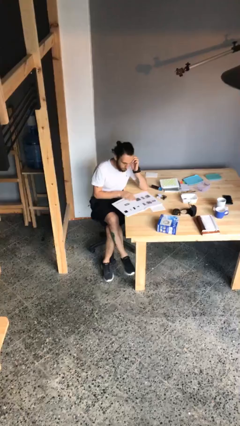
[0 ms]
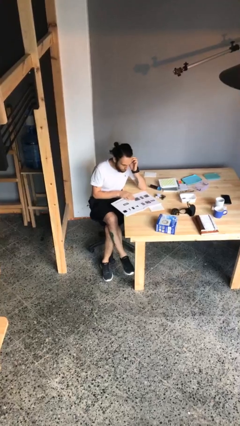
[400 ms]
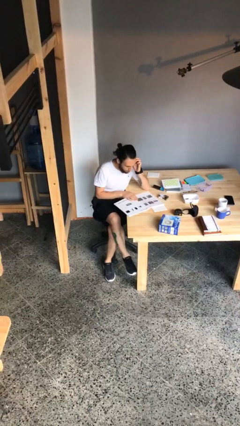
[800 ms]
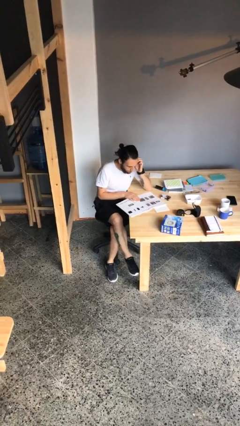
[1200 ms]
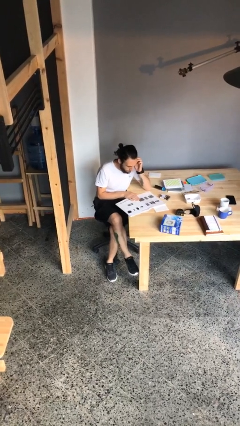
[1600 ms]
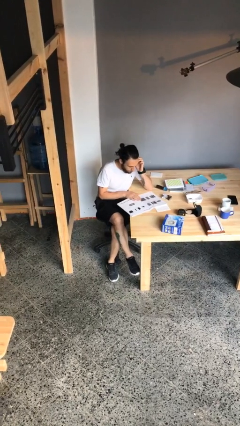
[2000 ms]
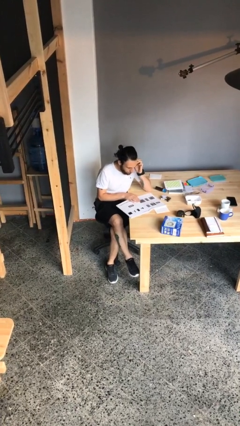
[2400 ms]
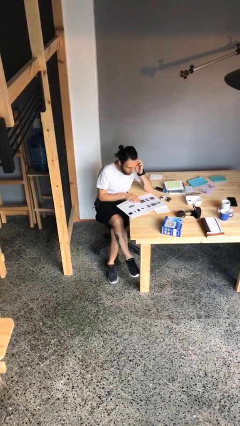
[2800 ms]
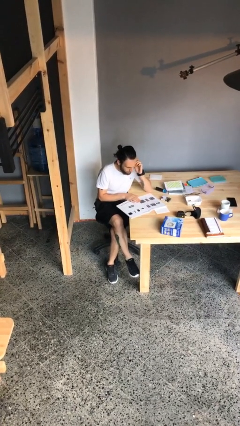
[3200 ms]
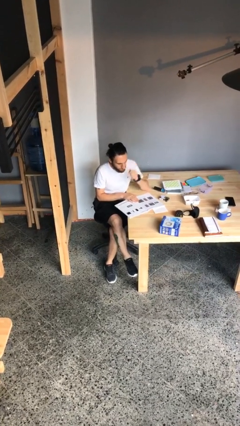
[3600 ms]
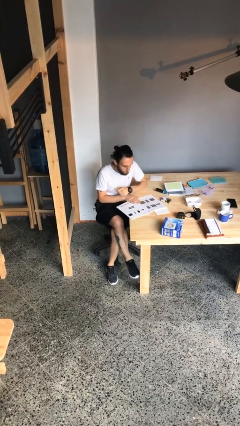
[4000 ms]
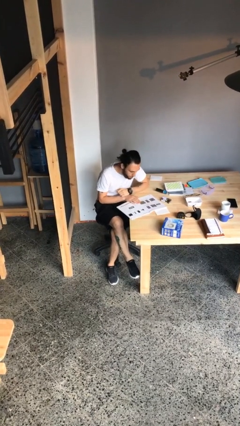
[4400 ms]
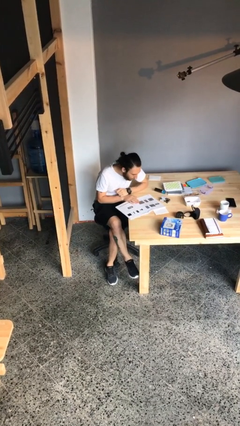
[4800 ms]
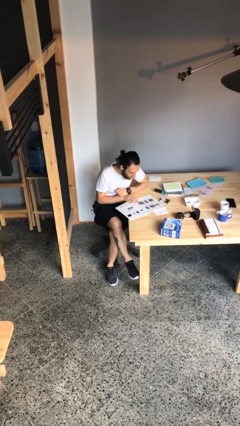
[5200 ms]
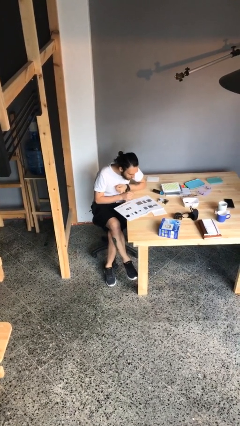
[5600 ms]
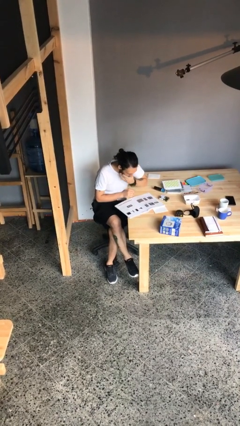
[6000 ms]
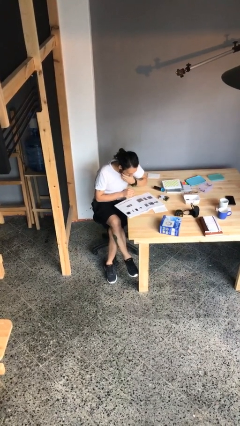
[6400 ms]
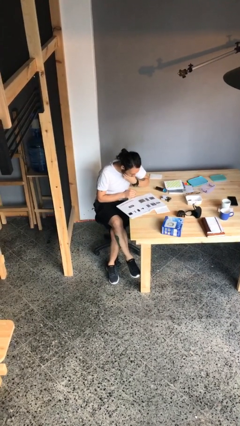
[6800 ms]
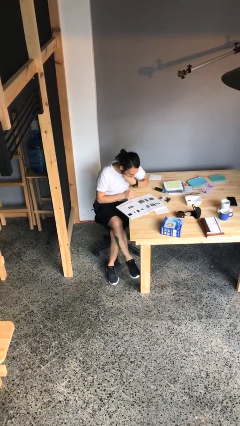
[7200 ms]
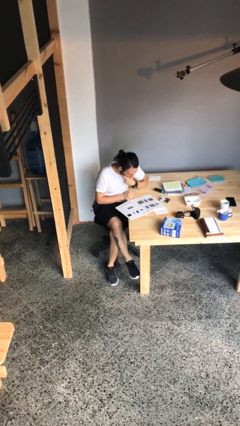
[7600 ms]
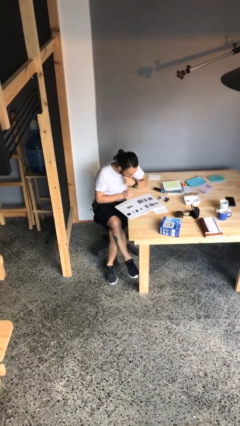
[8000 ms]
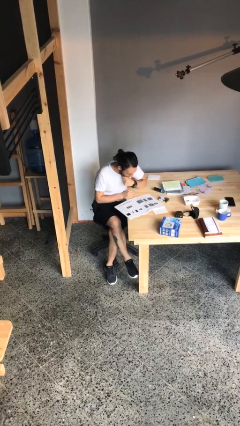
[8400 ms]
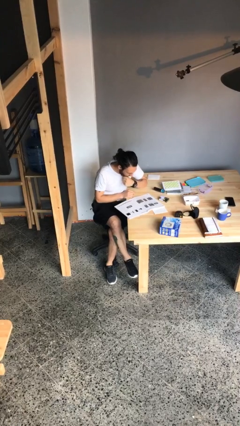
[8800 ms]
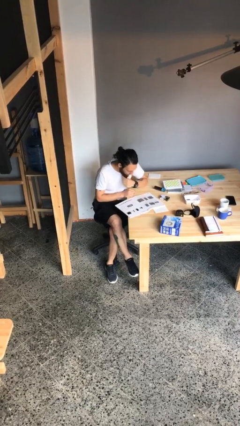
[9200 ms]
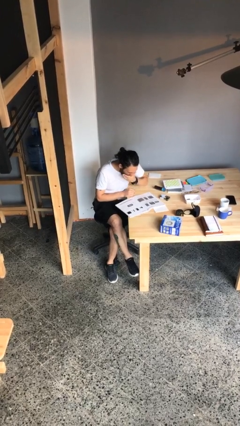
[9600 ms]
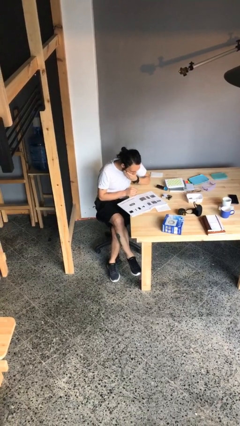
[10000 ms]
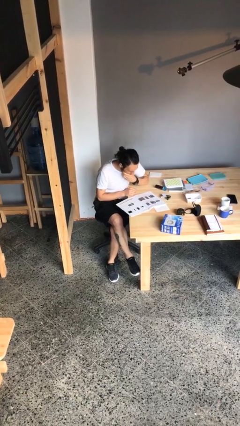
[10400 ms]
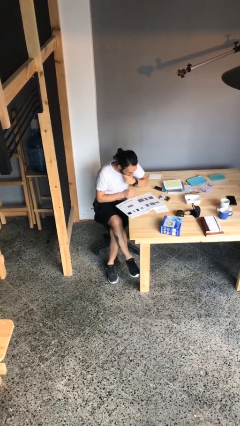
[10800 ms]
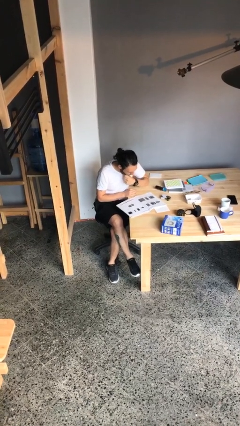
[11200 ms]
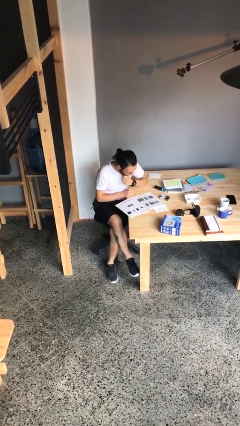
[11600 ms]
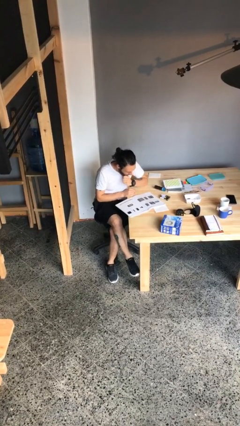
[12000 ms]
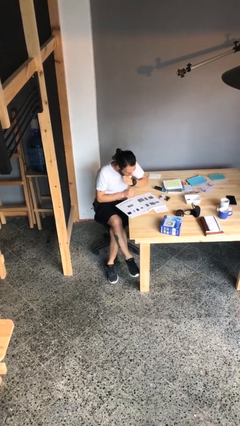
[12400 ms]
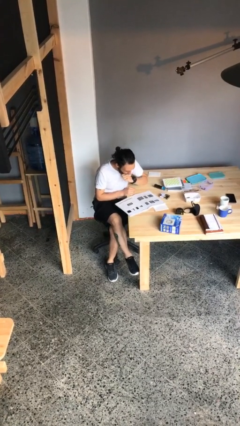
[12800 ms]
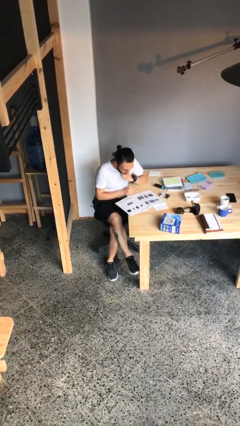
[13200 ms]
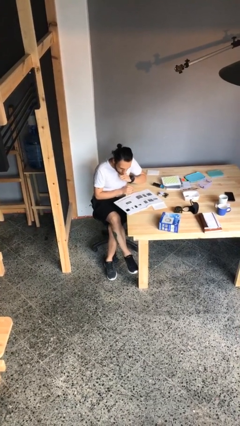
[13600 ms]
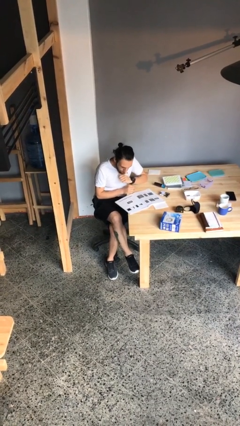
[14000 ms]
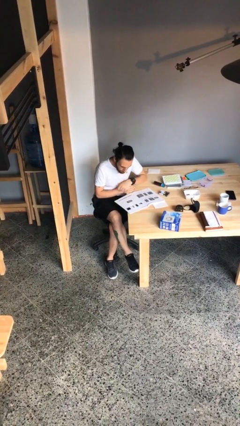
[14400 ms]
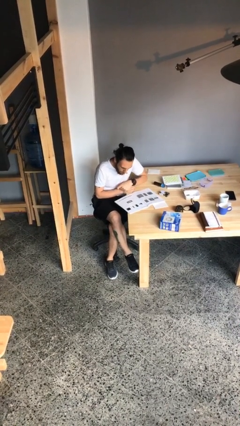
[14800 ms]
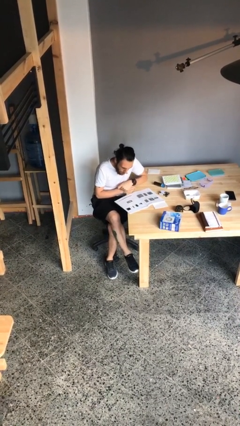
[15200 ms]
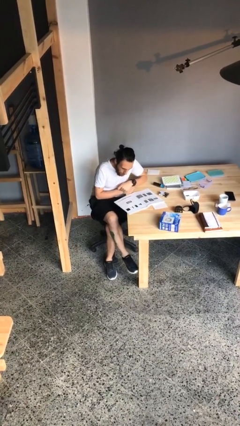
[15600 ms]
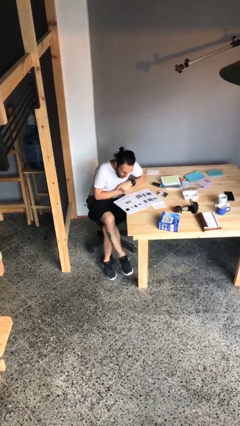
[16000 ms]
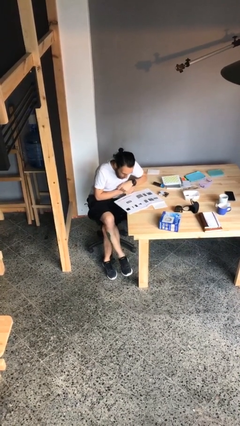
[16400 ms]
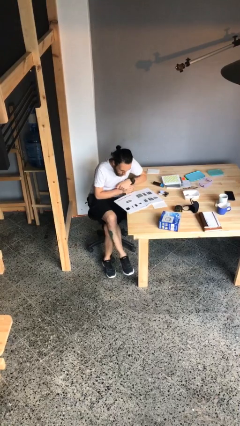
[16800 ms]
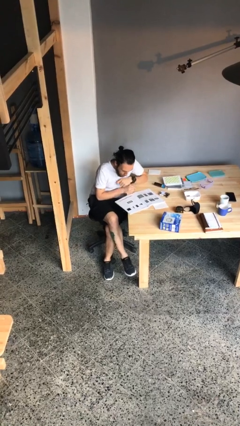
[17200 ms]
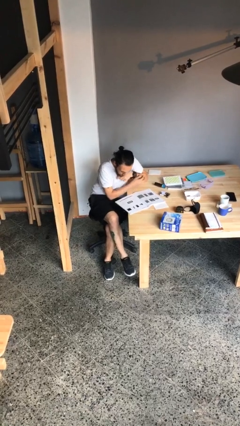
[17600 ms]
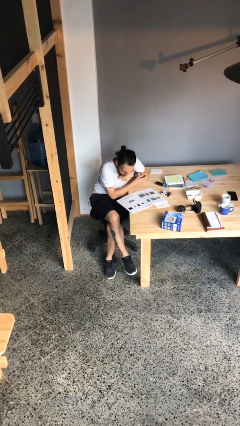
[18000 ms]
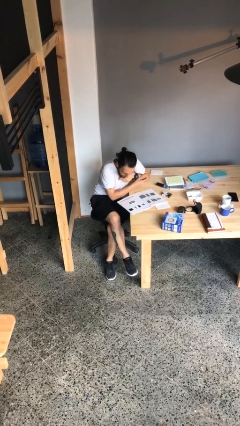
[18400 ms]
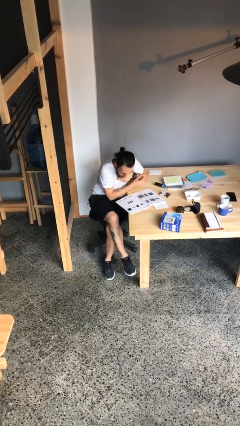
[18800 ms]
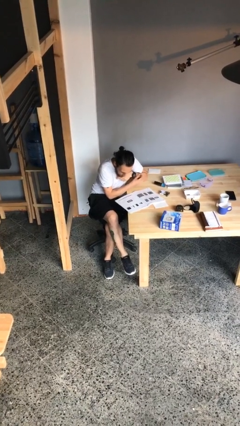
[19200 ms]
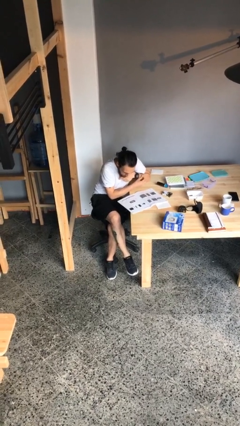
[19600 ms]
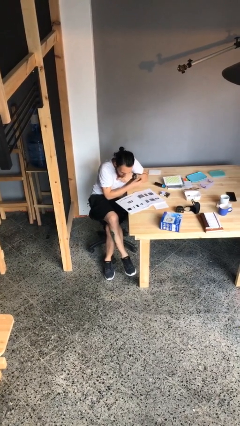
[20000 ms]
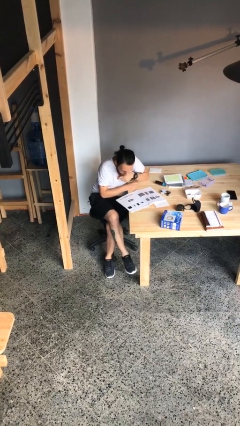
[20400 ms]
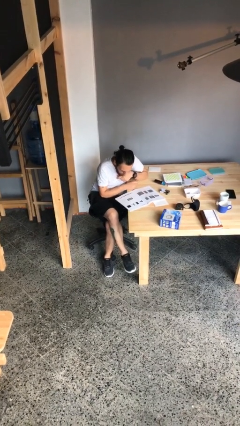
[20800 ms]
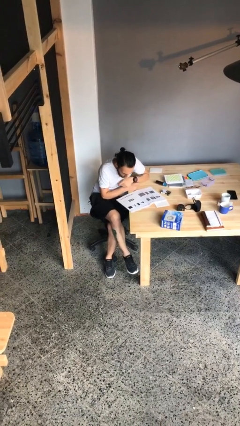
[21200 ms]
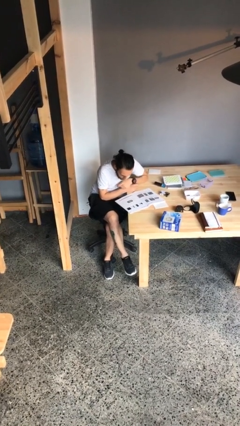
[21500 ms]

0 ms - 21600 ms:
person reads document

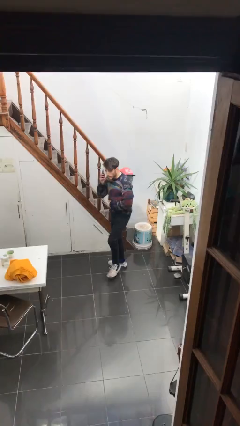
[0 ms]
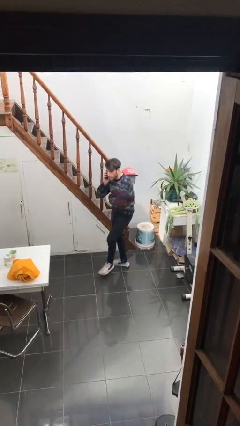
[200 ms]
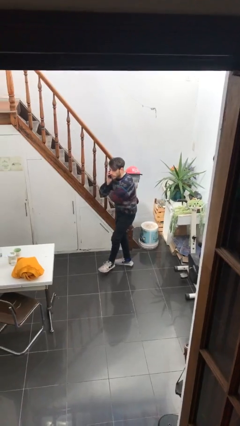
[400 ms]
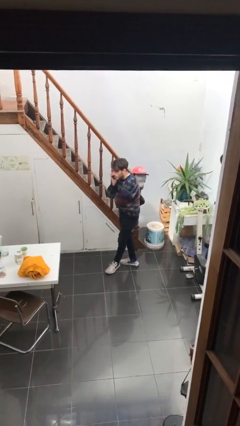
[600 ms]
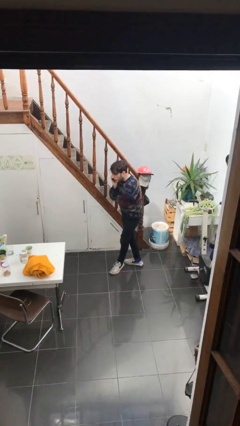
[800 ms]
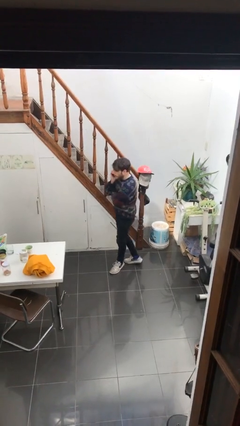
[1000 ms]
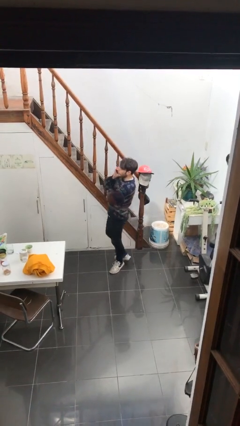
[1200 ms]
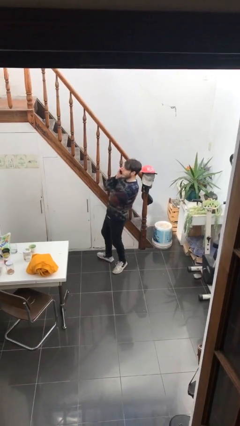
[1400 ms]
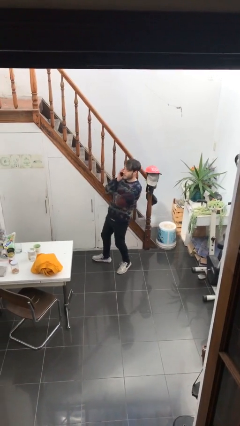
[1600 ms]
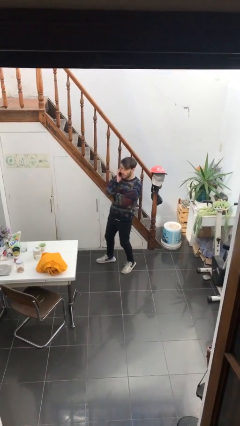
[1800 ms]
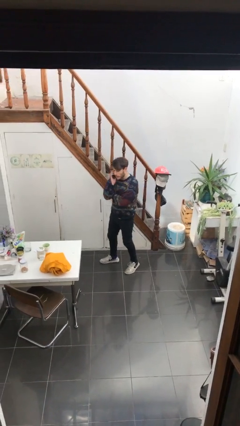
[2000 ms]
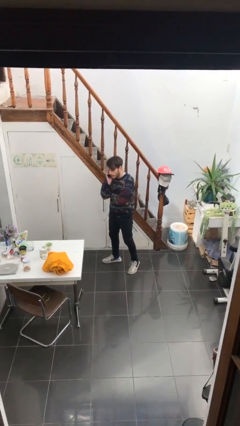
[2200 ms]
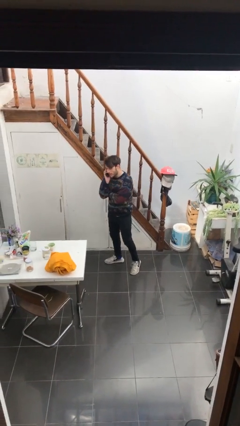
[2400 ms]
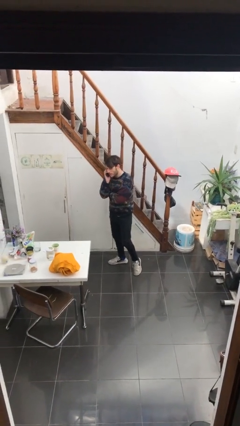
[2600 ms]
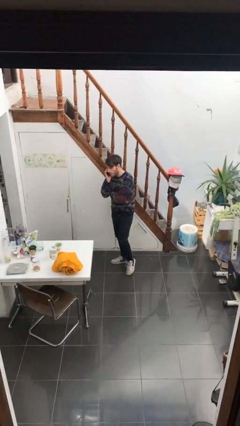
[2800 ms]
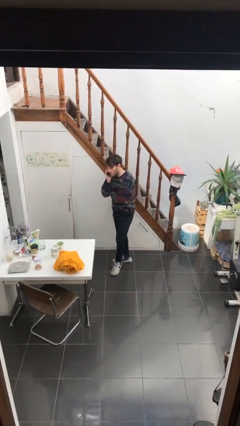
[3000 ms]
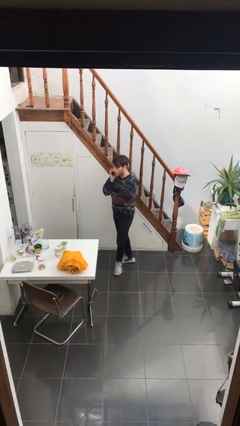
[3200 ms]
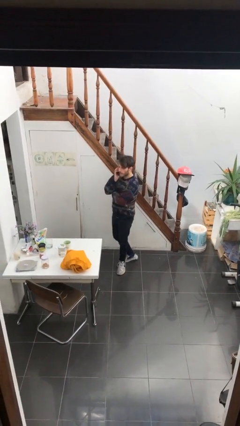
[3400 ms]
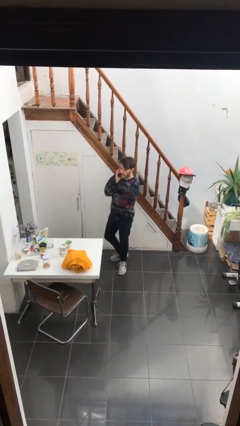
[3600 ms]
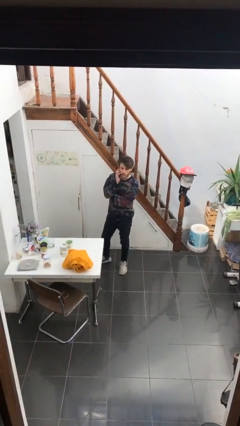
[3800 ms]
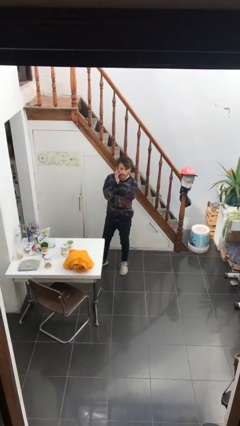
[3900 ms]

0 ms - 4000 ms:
person talks on phone

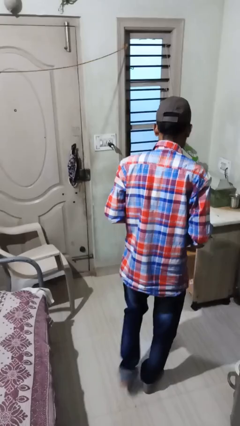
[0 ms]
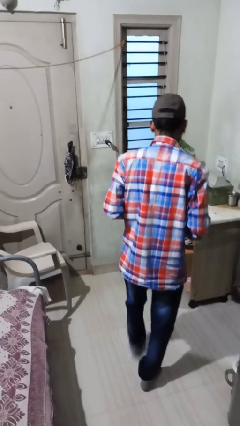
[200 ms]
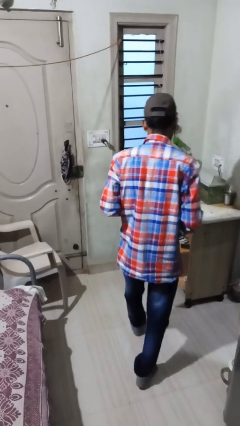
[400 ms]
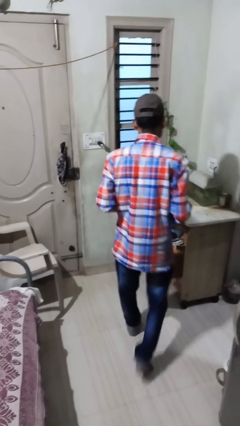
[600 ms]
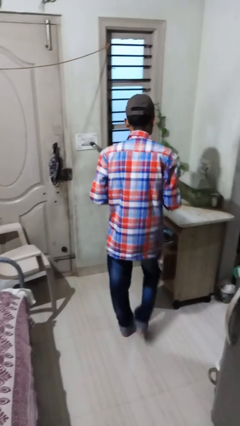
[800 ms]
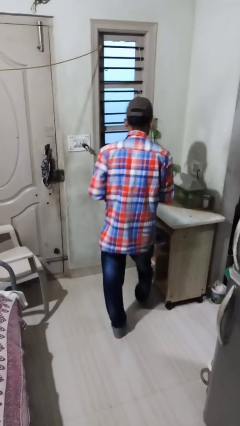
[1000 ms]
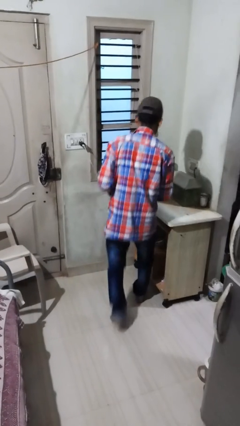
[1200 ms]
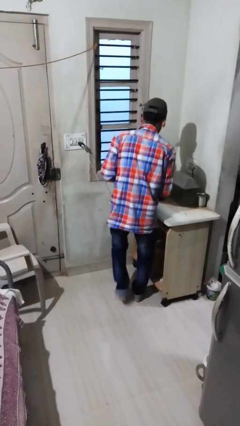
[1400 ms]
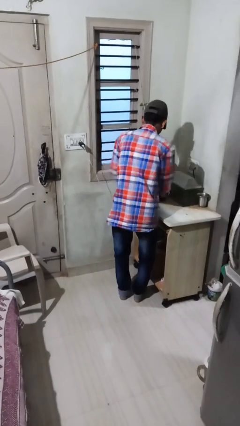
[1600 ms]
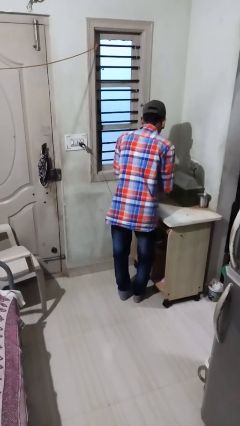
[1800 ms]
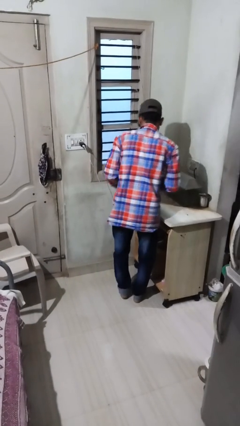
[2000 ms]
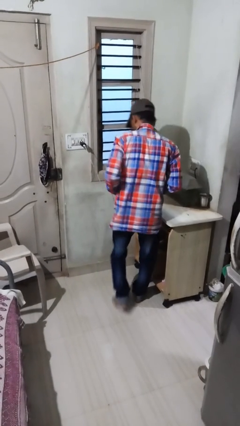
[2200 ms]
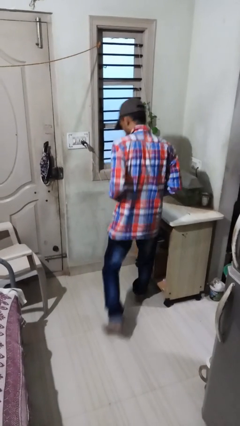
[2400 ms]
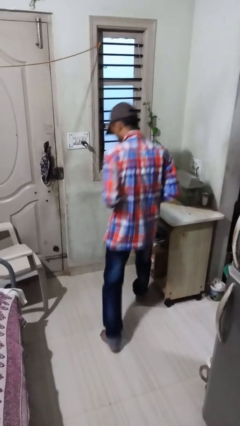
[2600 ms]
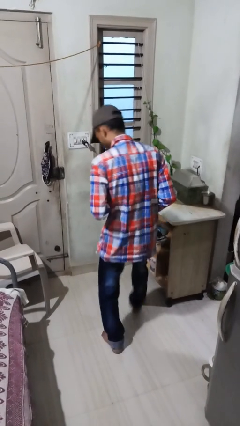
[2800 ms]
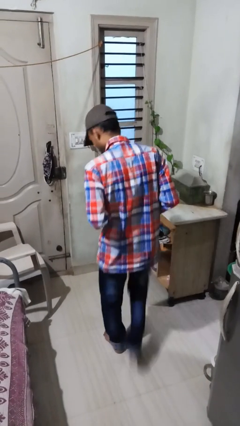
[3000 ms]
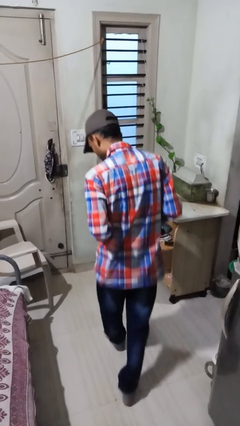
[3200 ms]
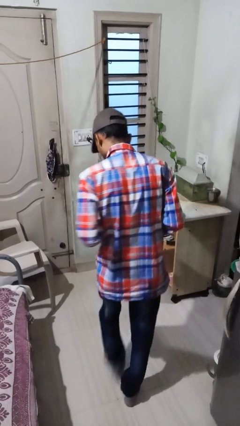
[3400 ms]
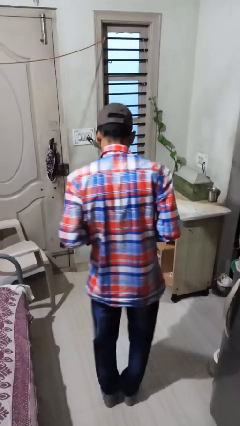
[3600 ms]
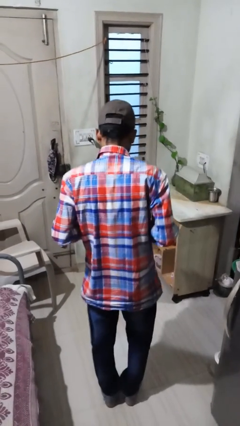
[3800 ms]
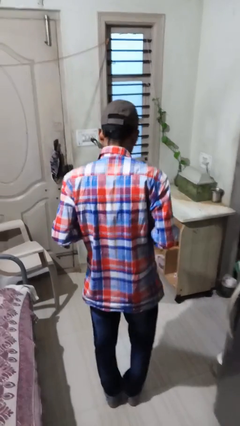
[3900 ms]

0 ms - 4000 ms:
person picks up object from table
